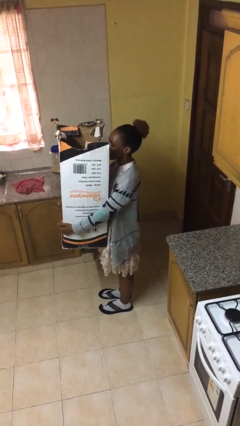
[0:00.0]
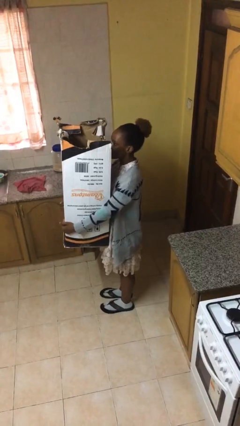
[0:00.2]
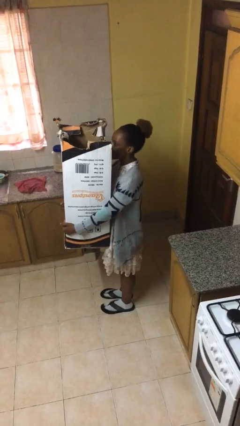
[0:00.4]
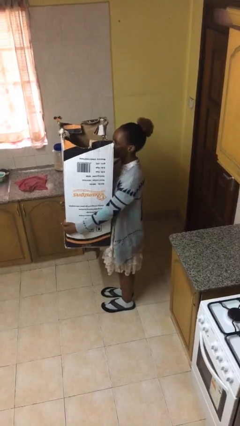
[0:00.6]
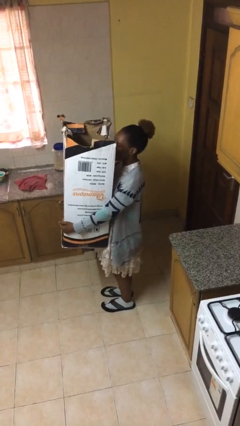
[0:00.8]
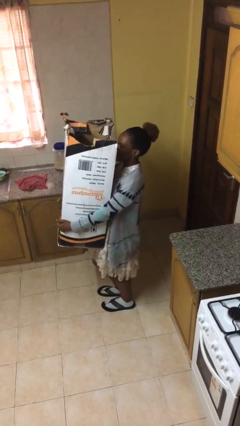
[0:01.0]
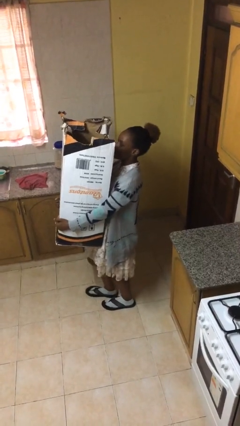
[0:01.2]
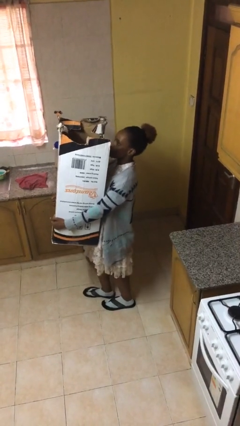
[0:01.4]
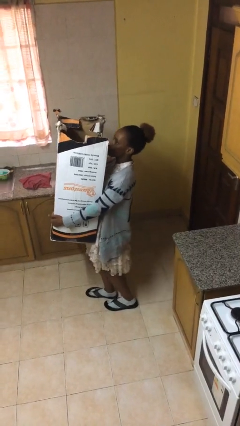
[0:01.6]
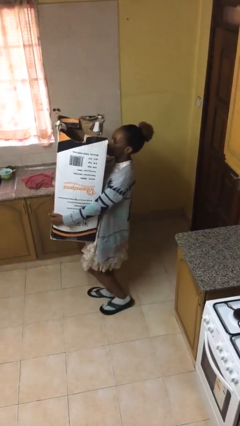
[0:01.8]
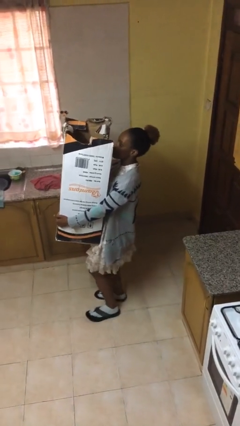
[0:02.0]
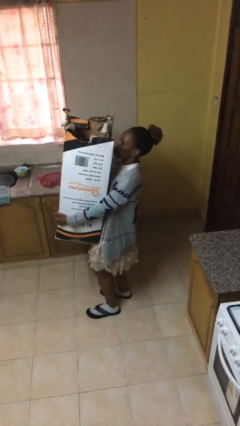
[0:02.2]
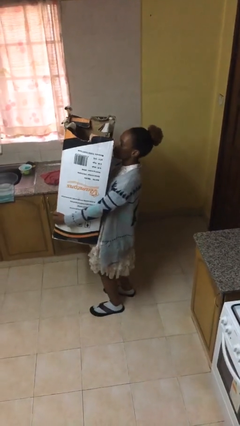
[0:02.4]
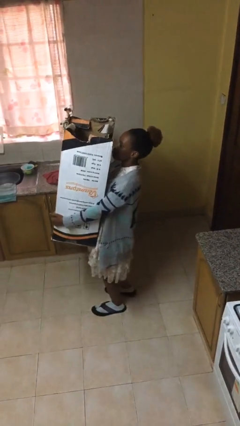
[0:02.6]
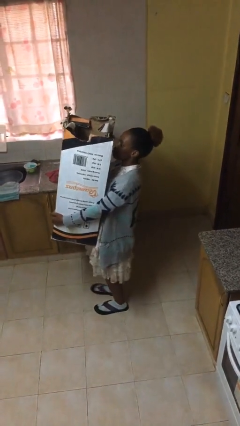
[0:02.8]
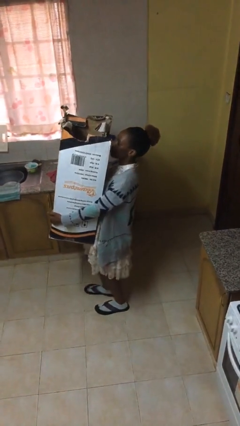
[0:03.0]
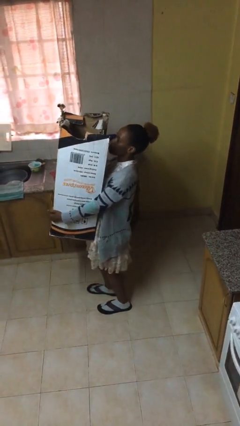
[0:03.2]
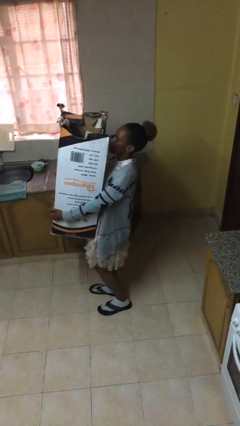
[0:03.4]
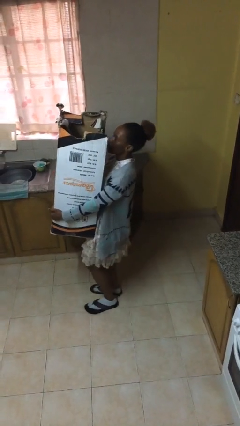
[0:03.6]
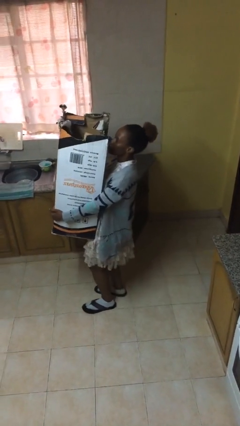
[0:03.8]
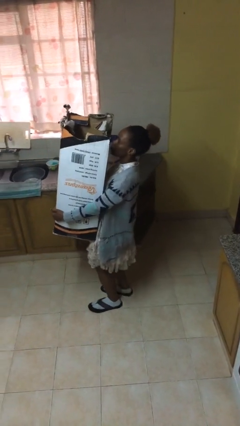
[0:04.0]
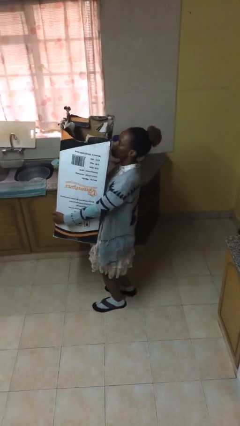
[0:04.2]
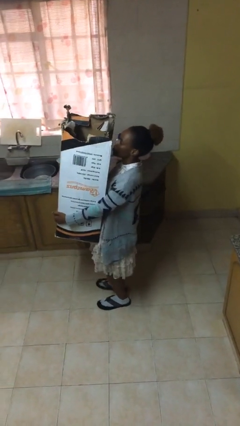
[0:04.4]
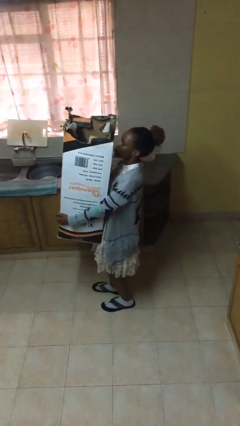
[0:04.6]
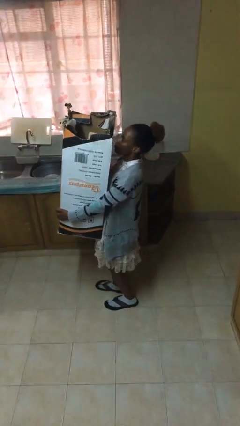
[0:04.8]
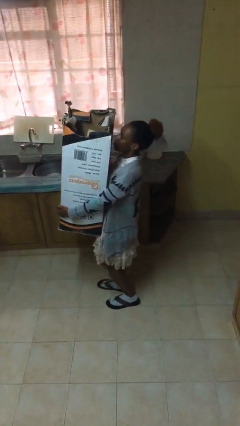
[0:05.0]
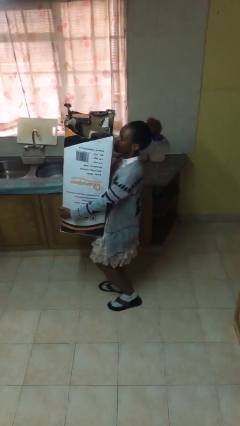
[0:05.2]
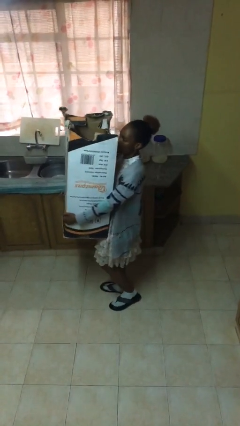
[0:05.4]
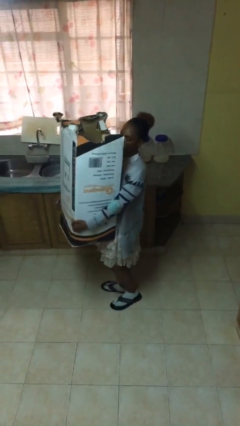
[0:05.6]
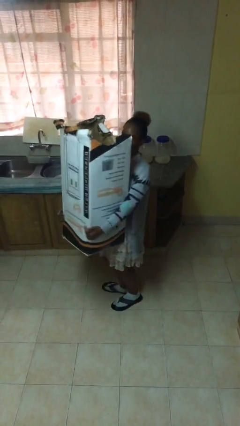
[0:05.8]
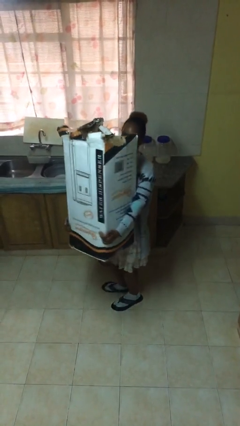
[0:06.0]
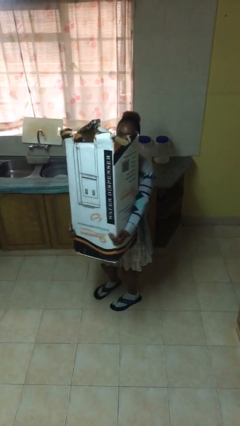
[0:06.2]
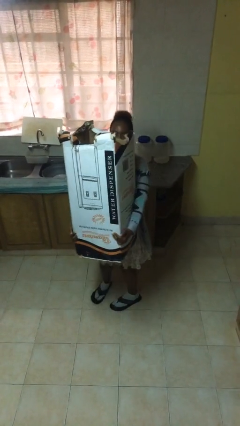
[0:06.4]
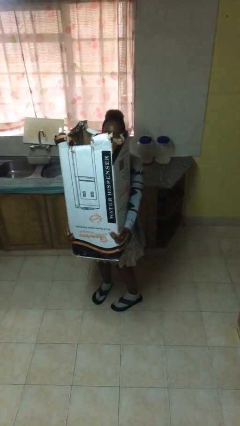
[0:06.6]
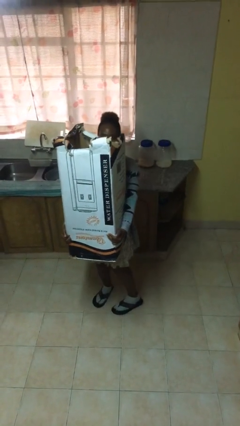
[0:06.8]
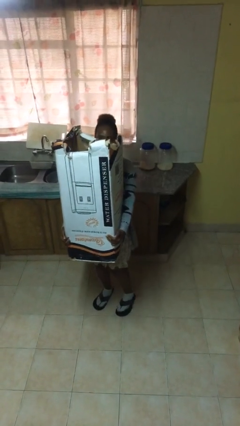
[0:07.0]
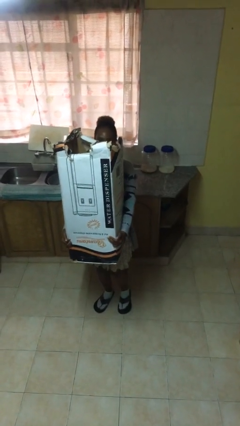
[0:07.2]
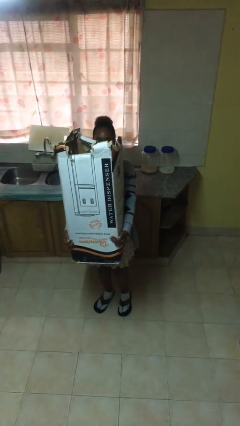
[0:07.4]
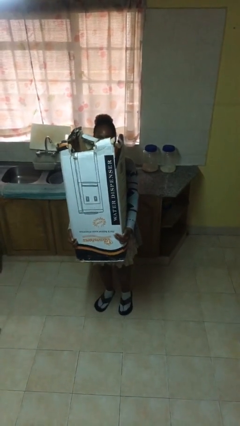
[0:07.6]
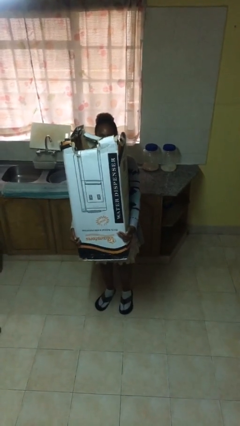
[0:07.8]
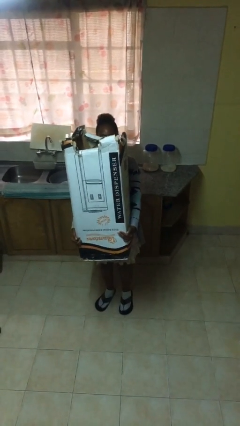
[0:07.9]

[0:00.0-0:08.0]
person carries heavy object

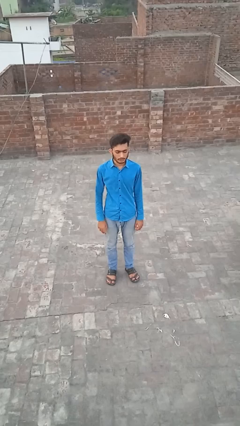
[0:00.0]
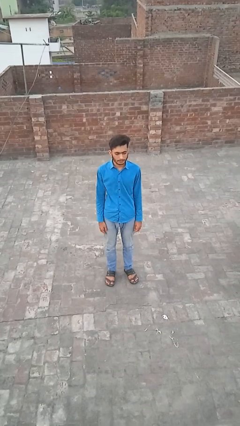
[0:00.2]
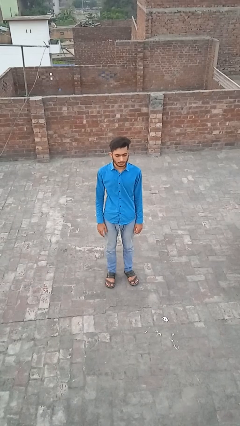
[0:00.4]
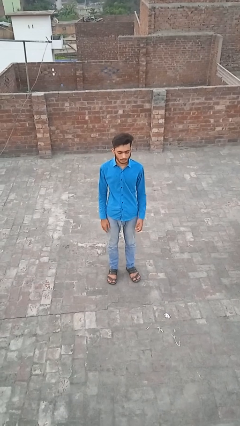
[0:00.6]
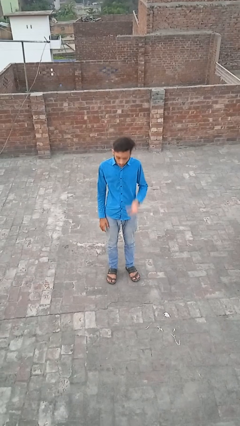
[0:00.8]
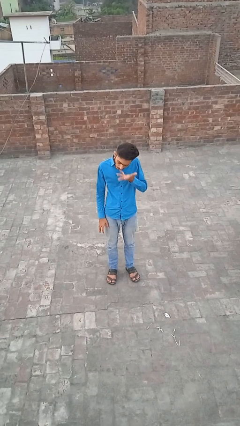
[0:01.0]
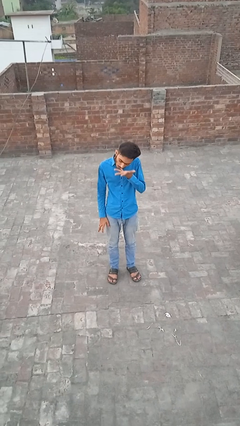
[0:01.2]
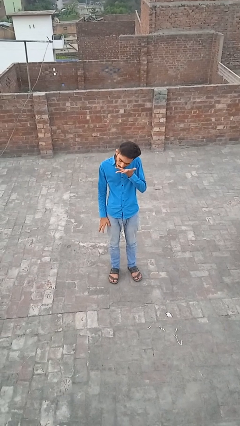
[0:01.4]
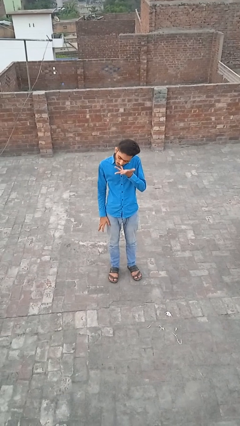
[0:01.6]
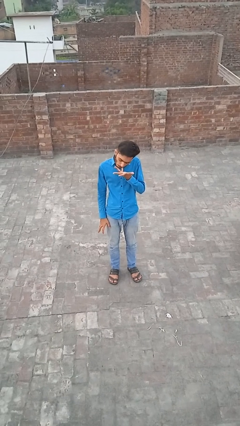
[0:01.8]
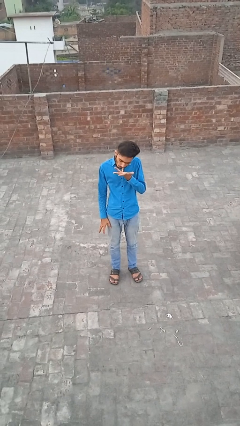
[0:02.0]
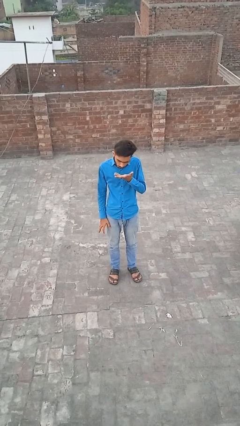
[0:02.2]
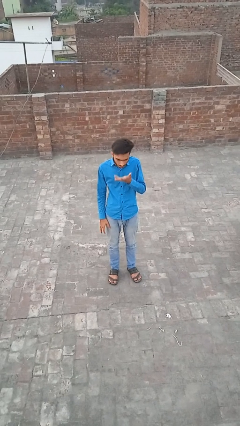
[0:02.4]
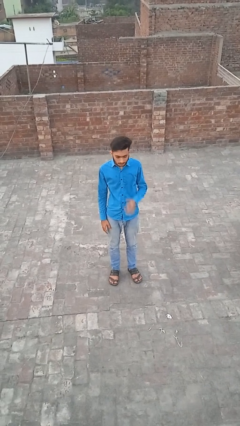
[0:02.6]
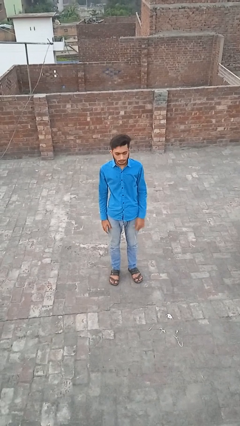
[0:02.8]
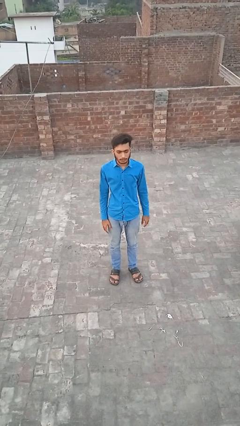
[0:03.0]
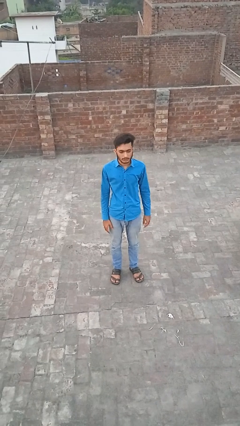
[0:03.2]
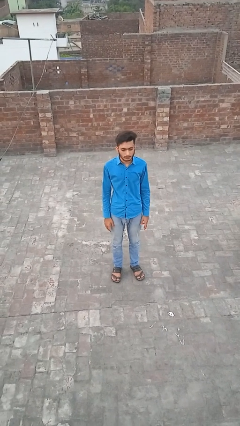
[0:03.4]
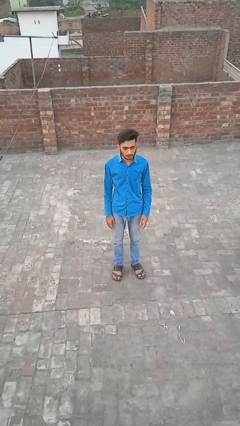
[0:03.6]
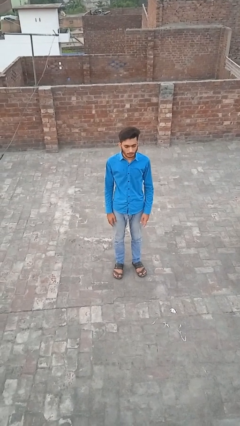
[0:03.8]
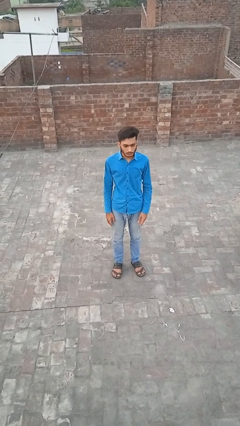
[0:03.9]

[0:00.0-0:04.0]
person licks fingers

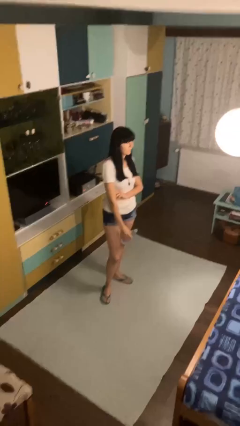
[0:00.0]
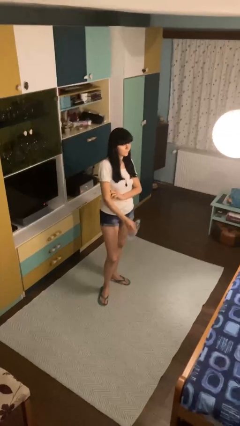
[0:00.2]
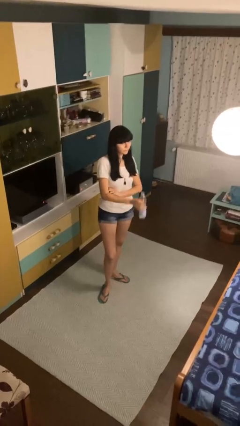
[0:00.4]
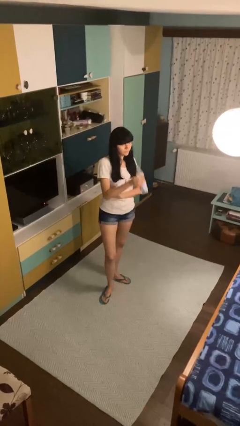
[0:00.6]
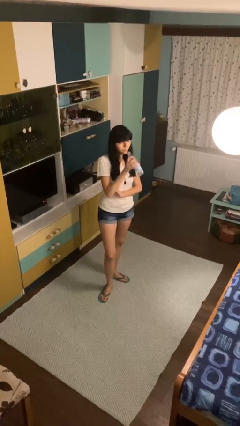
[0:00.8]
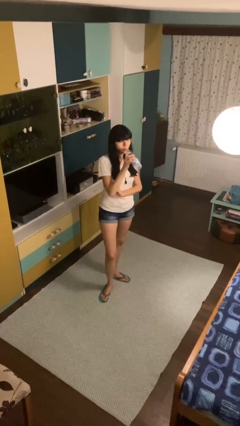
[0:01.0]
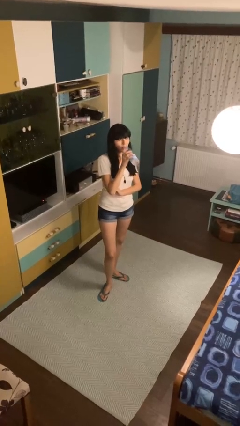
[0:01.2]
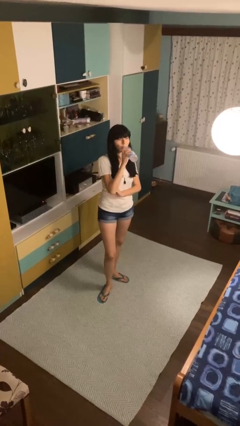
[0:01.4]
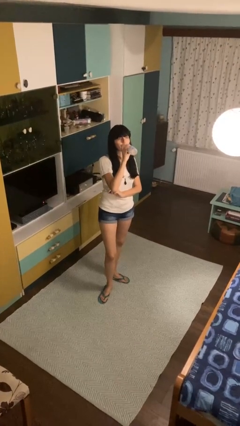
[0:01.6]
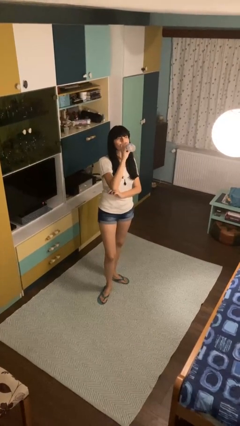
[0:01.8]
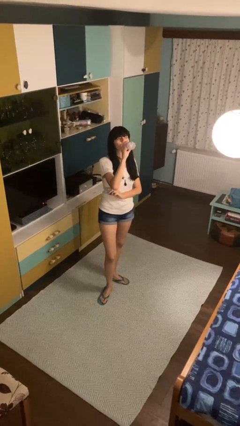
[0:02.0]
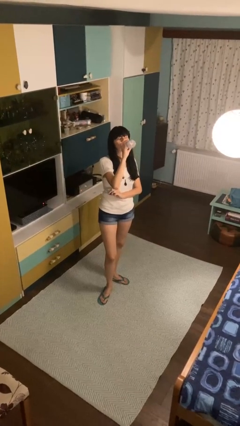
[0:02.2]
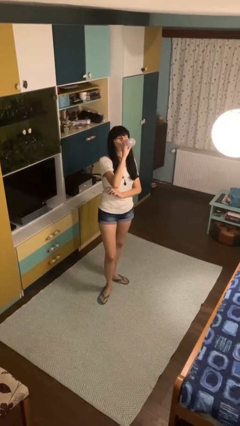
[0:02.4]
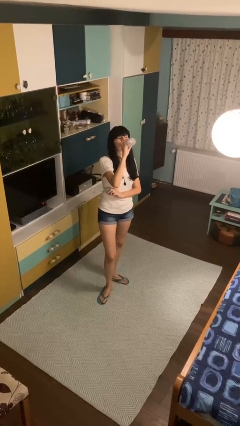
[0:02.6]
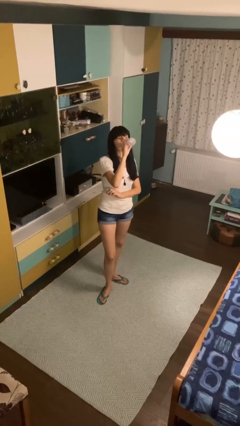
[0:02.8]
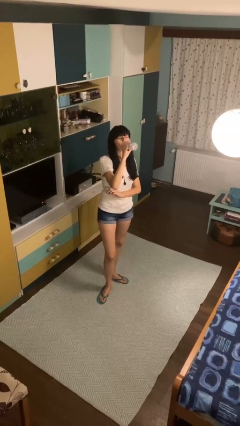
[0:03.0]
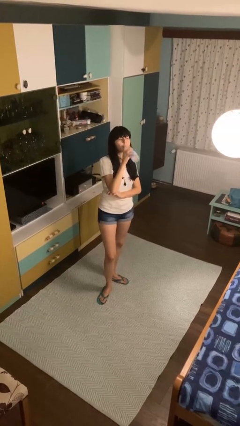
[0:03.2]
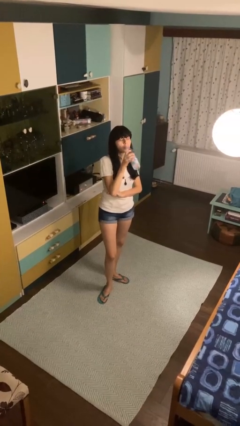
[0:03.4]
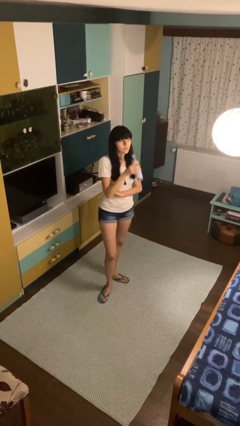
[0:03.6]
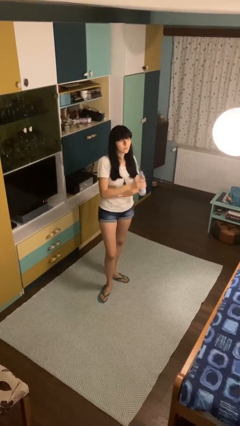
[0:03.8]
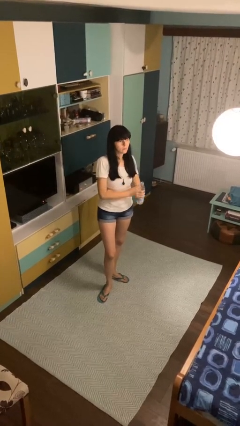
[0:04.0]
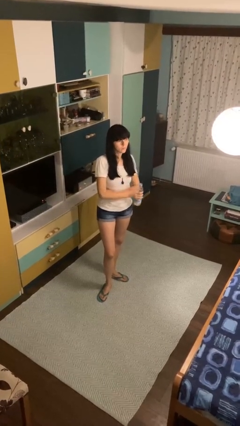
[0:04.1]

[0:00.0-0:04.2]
person drinks from bottle

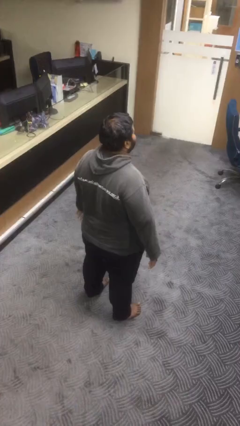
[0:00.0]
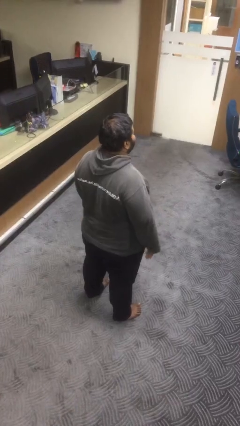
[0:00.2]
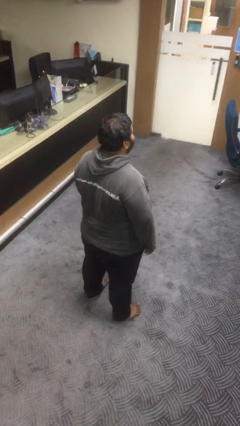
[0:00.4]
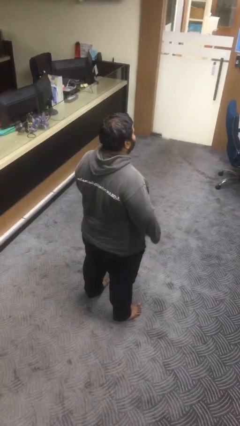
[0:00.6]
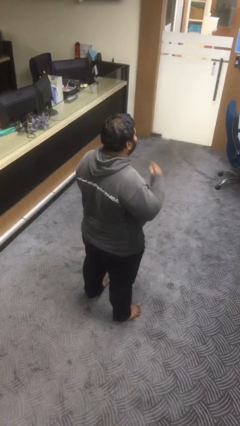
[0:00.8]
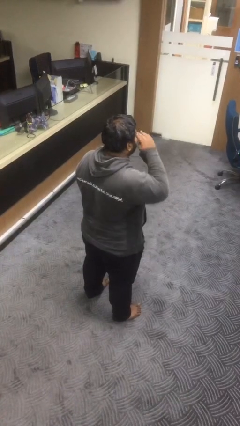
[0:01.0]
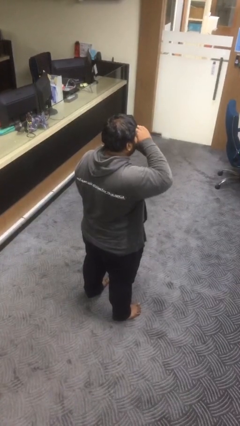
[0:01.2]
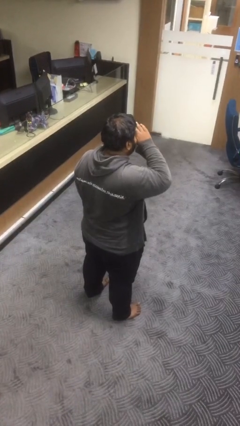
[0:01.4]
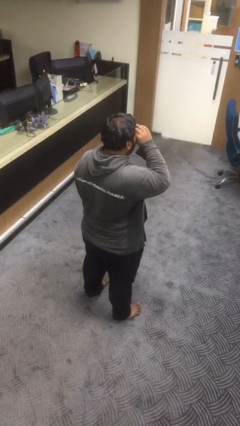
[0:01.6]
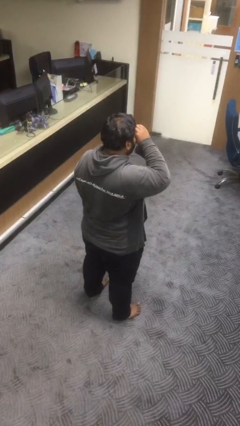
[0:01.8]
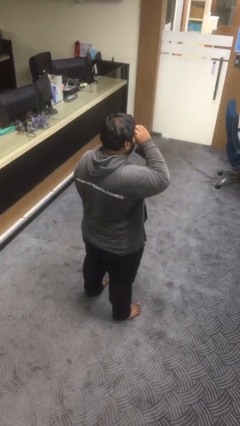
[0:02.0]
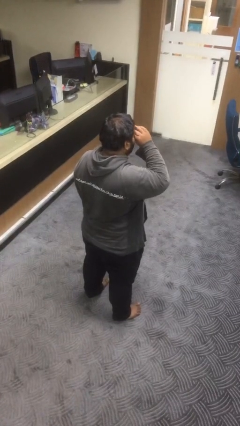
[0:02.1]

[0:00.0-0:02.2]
person rubs eyes
